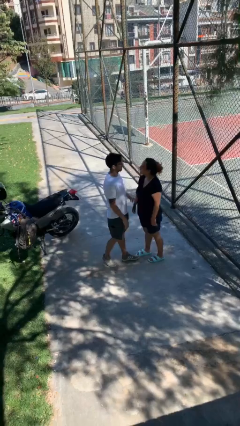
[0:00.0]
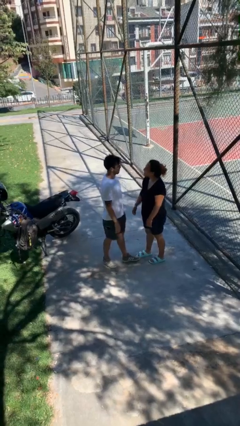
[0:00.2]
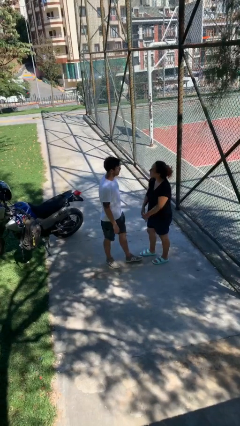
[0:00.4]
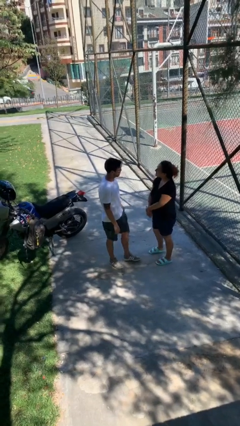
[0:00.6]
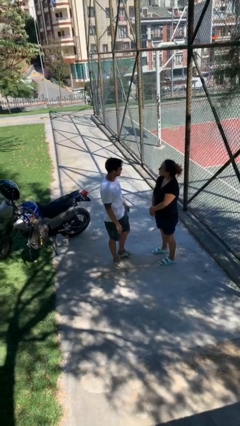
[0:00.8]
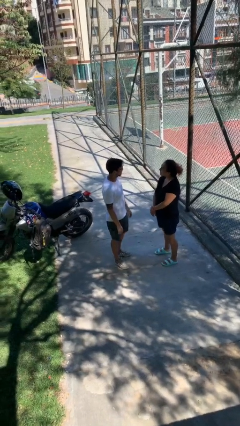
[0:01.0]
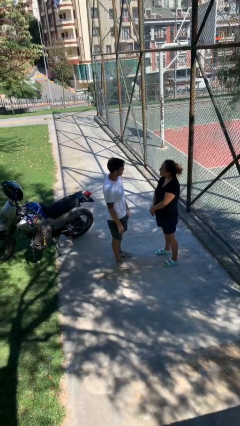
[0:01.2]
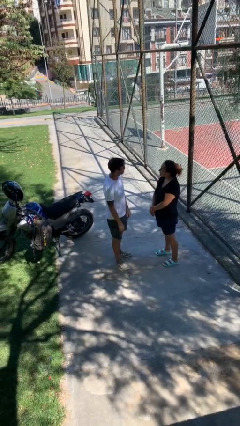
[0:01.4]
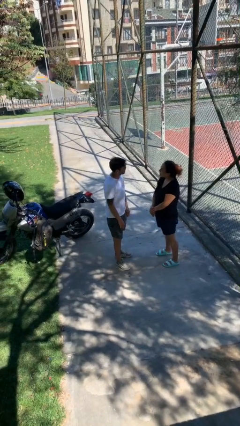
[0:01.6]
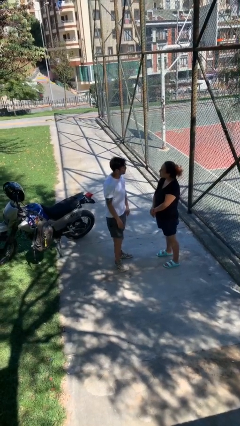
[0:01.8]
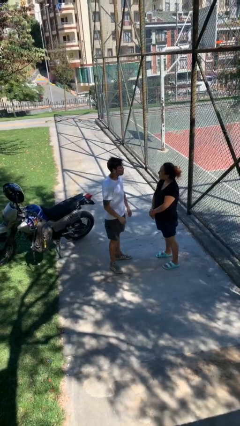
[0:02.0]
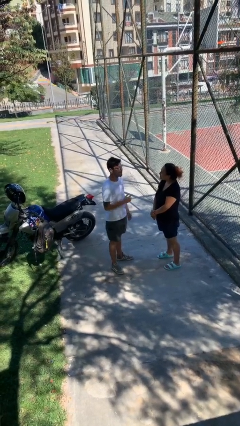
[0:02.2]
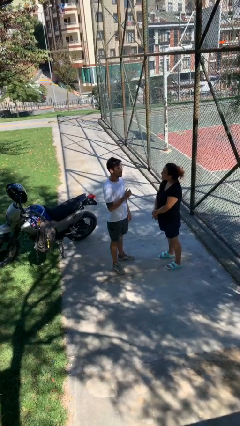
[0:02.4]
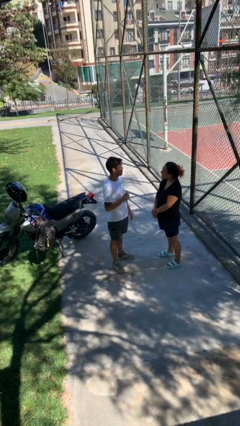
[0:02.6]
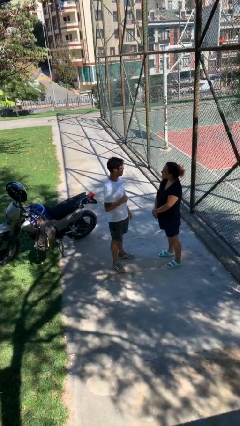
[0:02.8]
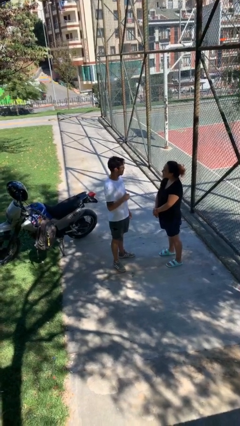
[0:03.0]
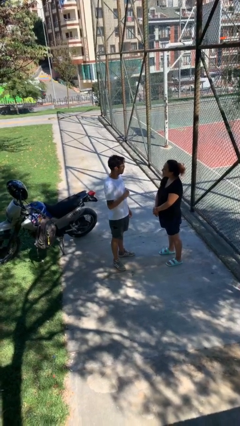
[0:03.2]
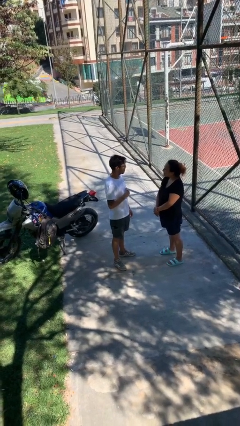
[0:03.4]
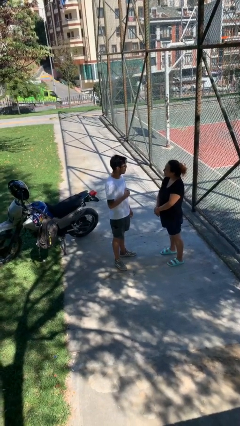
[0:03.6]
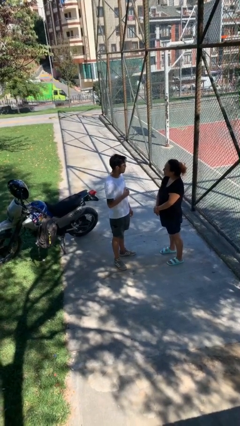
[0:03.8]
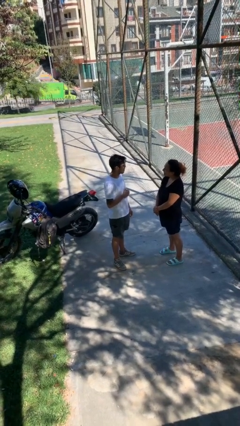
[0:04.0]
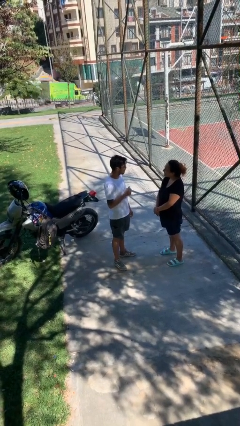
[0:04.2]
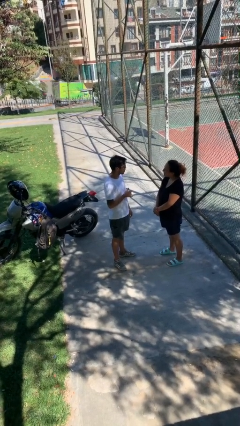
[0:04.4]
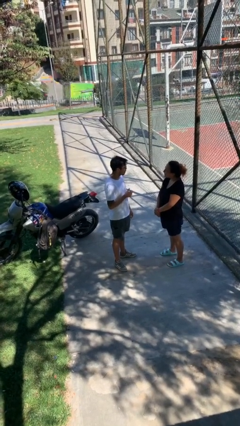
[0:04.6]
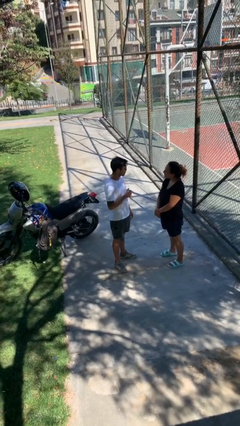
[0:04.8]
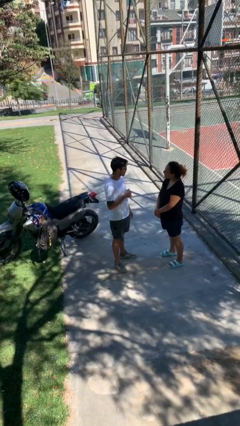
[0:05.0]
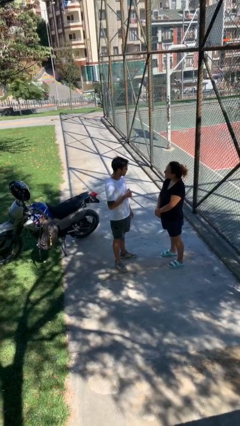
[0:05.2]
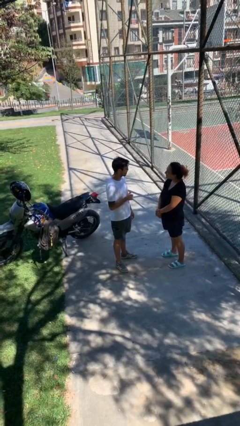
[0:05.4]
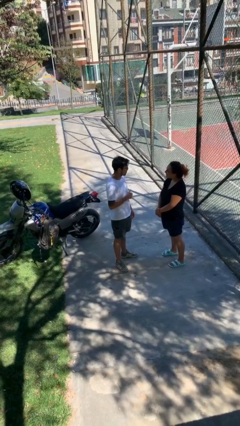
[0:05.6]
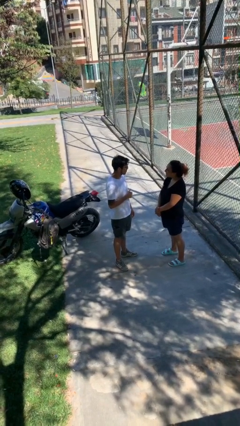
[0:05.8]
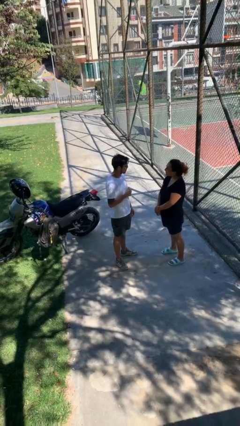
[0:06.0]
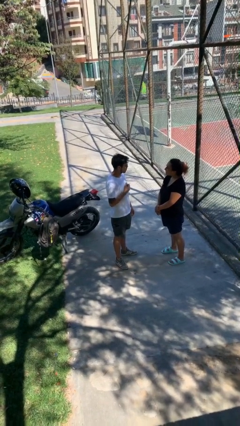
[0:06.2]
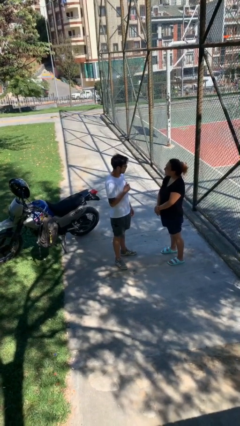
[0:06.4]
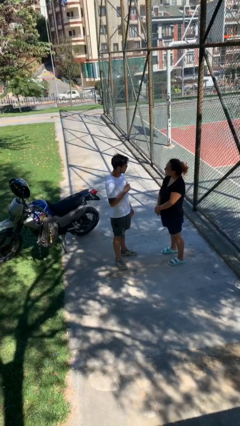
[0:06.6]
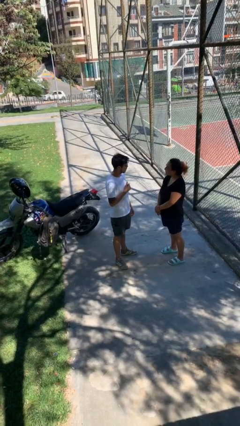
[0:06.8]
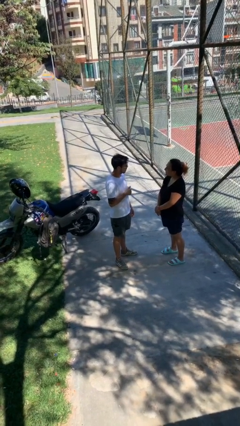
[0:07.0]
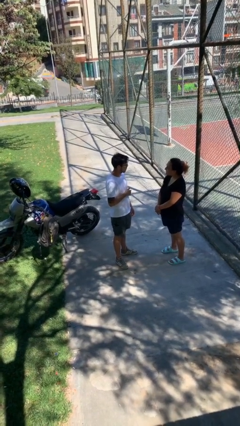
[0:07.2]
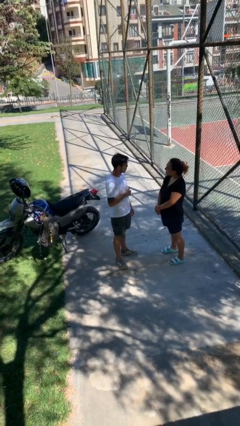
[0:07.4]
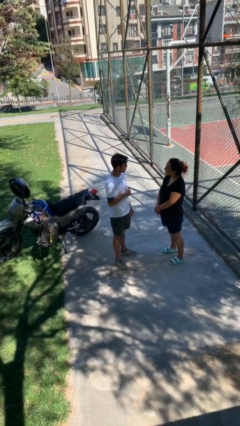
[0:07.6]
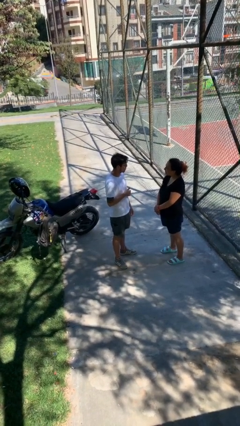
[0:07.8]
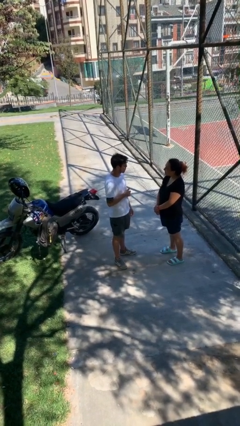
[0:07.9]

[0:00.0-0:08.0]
person talks to person

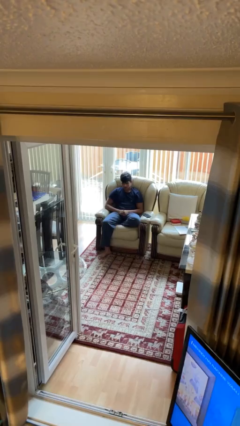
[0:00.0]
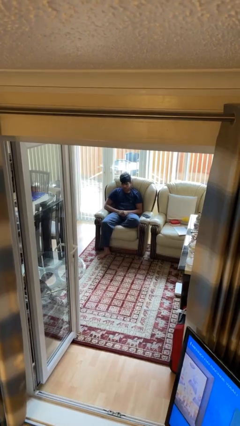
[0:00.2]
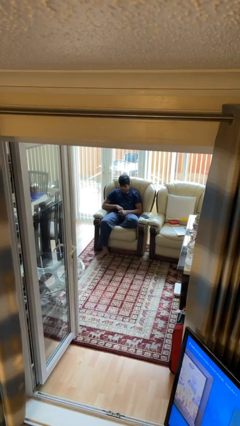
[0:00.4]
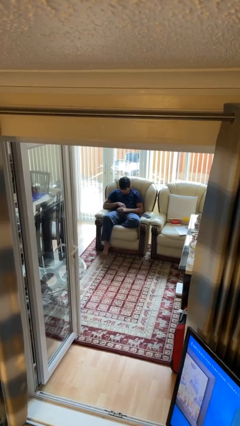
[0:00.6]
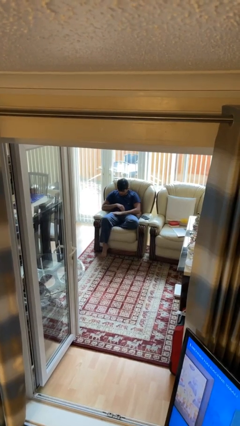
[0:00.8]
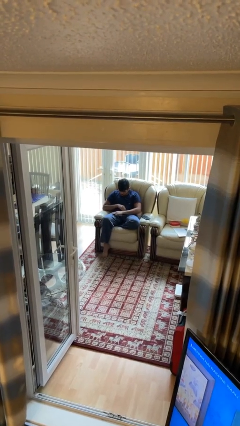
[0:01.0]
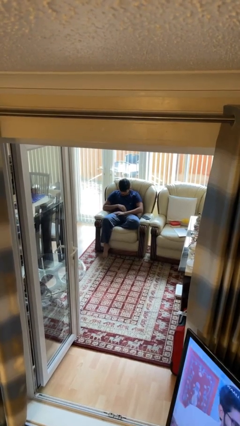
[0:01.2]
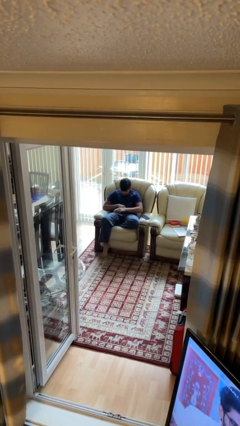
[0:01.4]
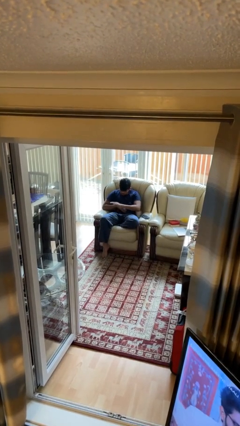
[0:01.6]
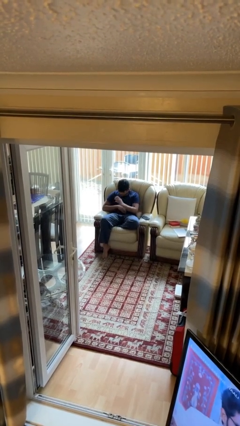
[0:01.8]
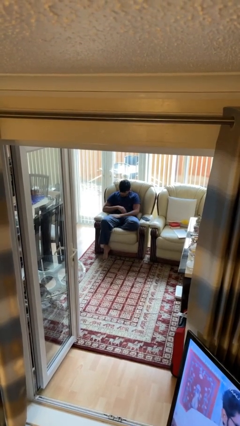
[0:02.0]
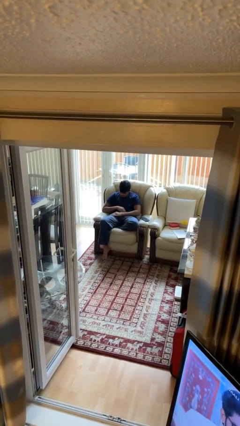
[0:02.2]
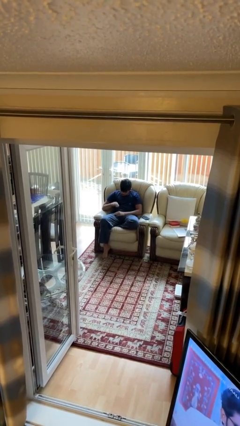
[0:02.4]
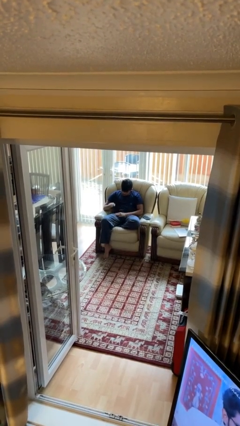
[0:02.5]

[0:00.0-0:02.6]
person swats bug

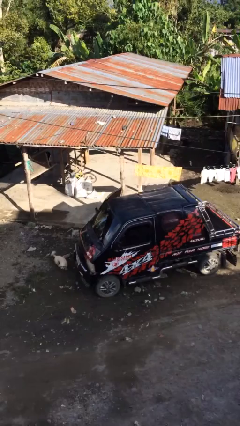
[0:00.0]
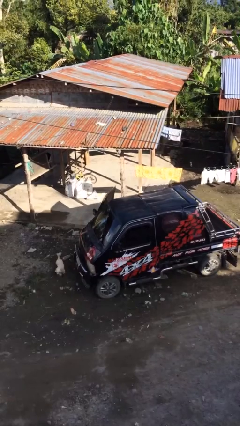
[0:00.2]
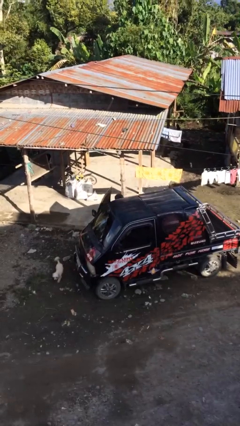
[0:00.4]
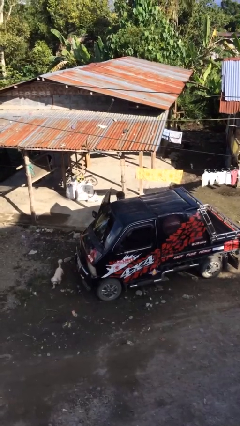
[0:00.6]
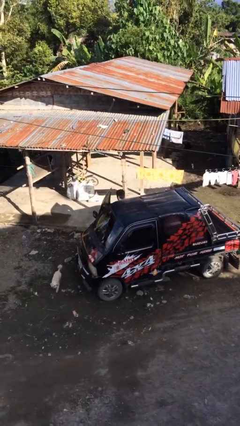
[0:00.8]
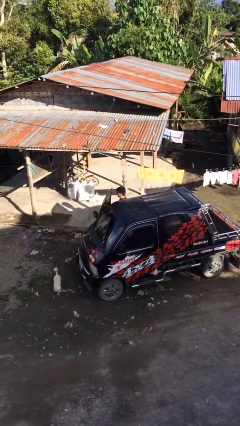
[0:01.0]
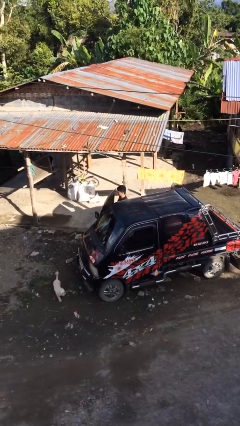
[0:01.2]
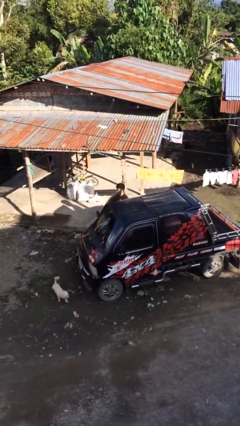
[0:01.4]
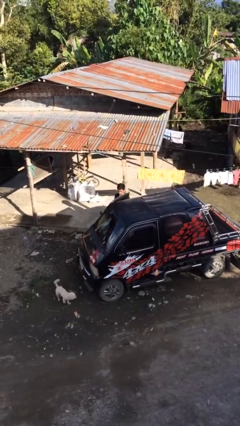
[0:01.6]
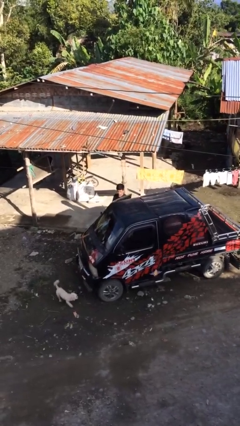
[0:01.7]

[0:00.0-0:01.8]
person exits car

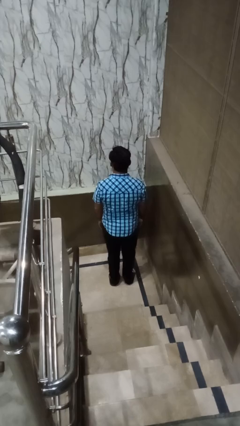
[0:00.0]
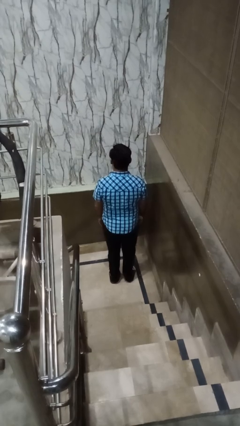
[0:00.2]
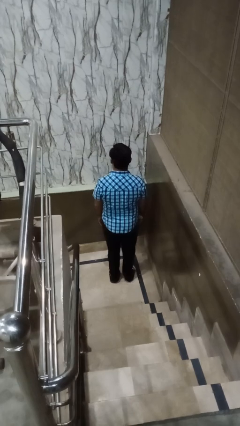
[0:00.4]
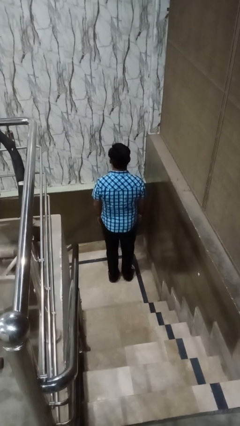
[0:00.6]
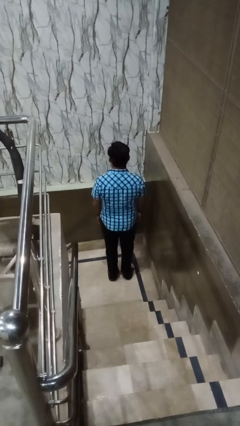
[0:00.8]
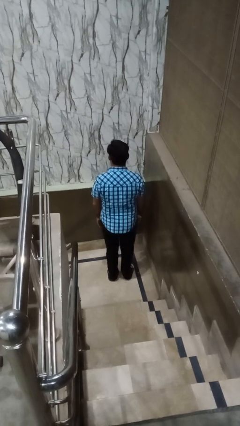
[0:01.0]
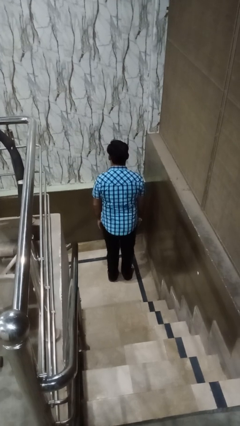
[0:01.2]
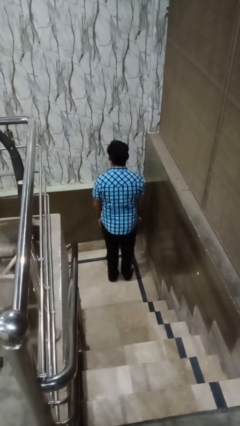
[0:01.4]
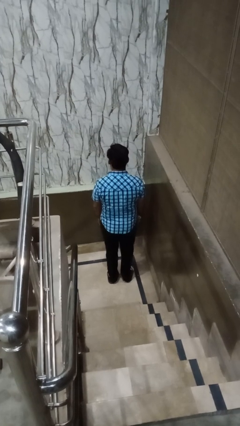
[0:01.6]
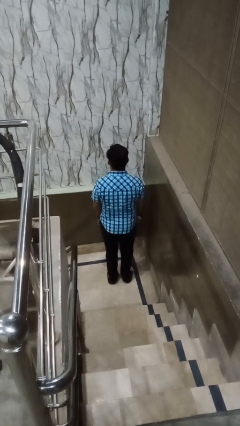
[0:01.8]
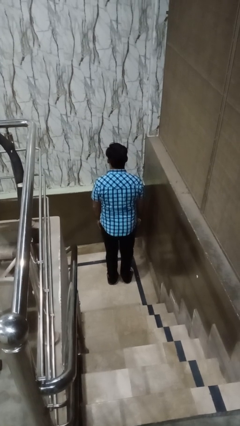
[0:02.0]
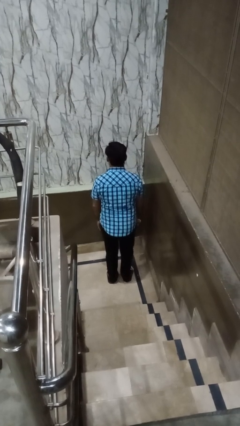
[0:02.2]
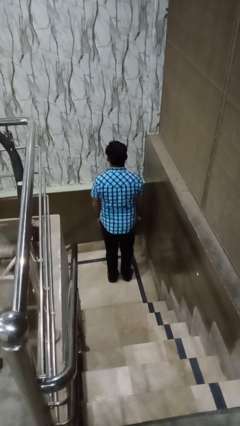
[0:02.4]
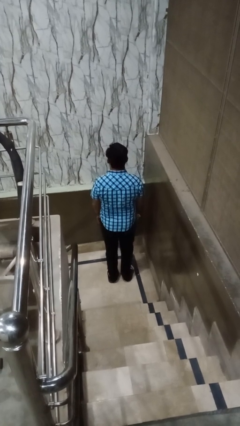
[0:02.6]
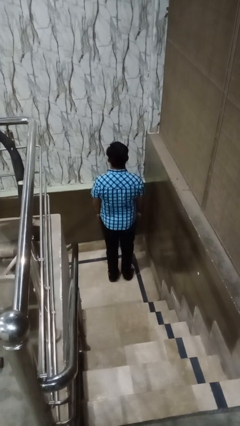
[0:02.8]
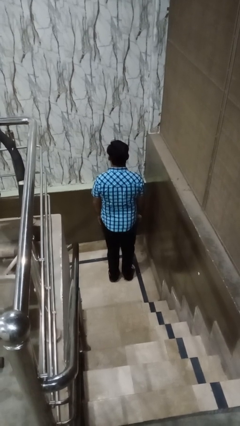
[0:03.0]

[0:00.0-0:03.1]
person wiggles hips

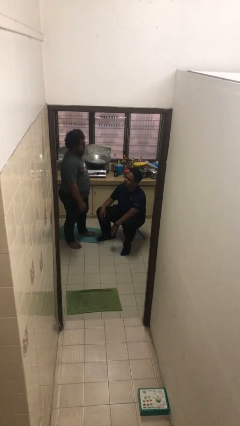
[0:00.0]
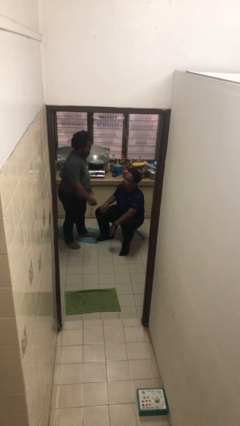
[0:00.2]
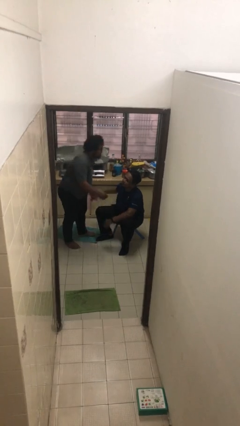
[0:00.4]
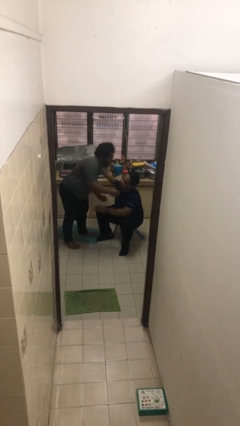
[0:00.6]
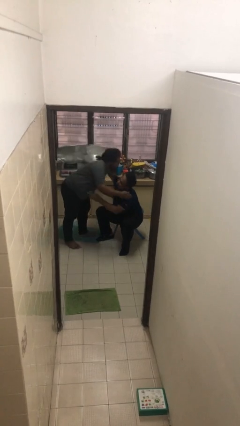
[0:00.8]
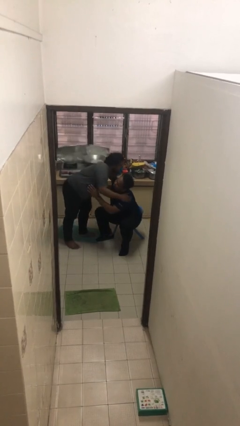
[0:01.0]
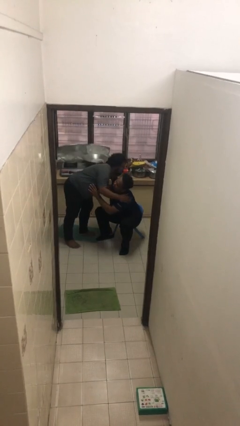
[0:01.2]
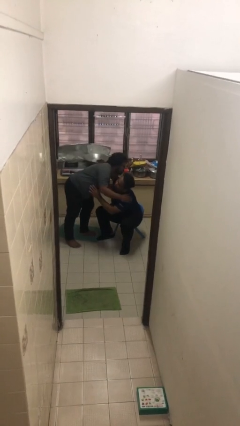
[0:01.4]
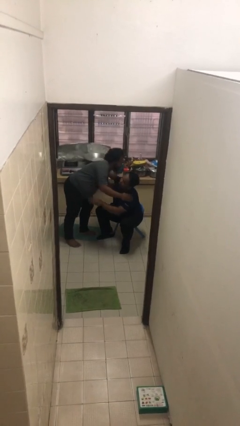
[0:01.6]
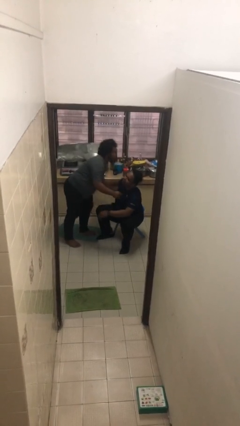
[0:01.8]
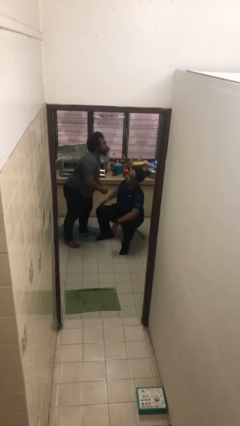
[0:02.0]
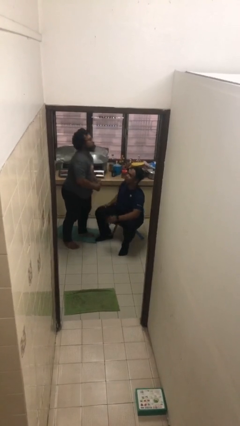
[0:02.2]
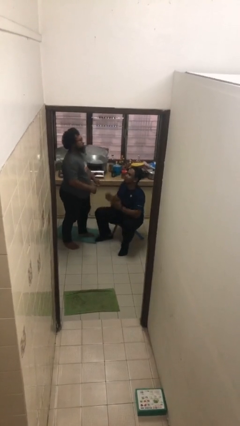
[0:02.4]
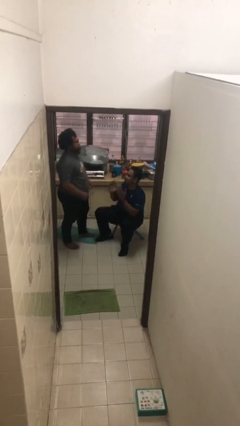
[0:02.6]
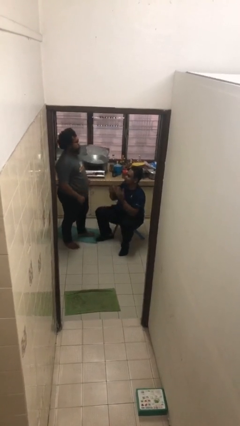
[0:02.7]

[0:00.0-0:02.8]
person embraces person
